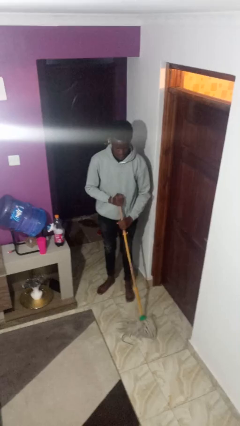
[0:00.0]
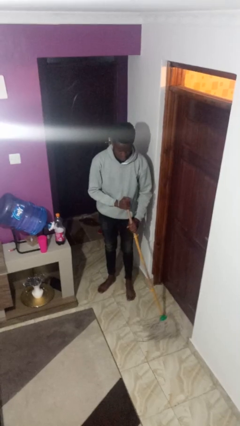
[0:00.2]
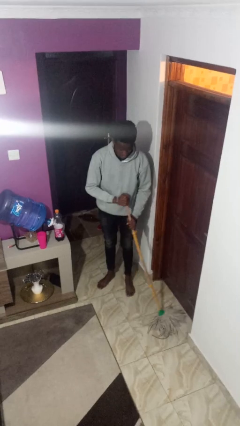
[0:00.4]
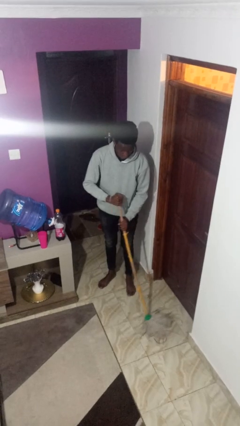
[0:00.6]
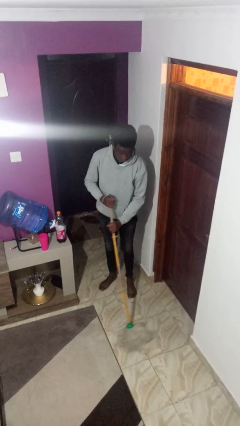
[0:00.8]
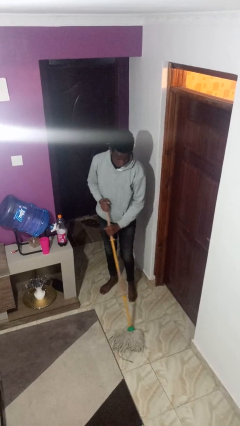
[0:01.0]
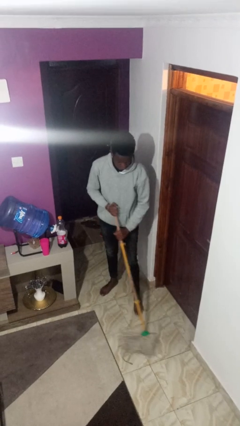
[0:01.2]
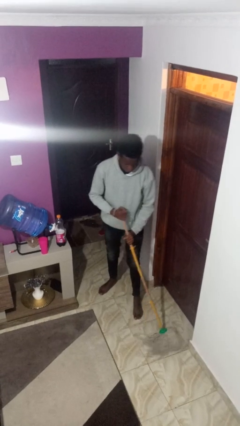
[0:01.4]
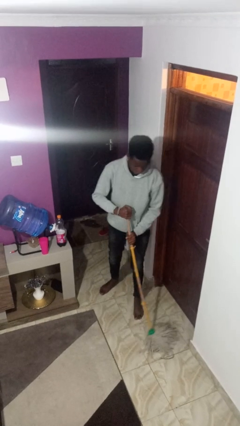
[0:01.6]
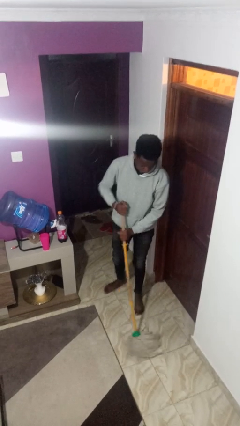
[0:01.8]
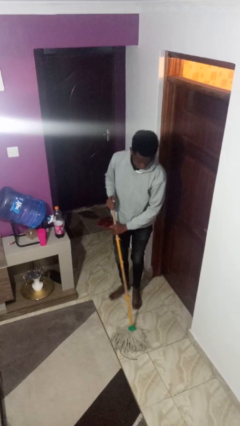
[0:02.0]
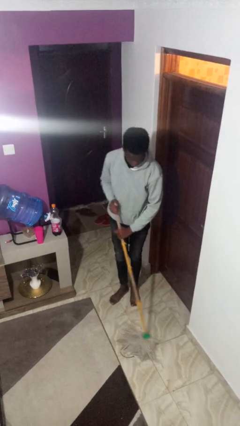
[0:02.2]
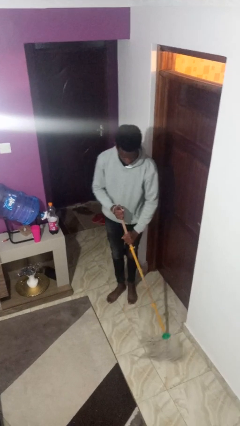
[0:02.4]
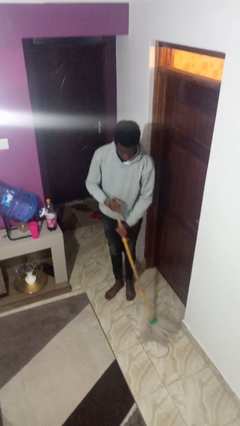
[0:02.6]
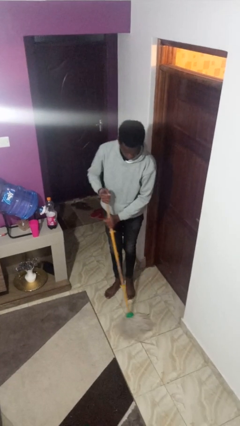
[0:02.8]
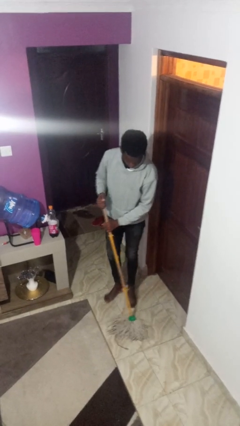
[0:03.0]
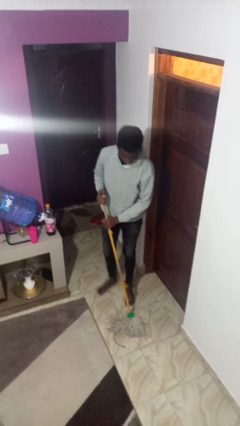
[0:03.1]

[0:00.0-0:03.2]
person mops

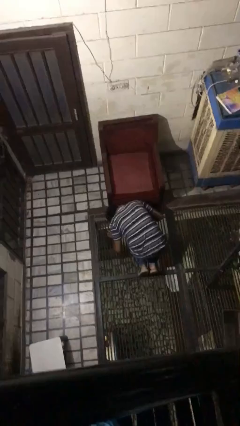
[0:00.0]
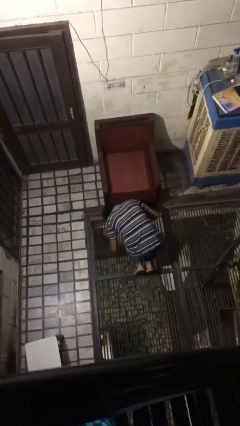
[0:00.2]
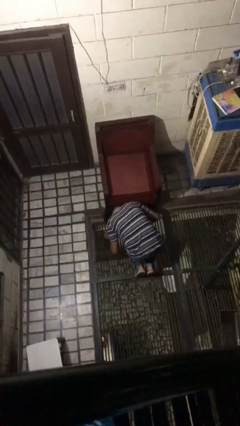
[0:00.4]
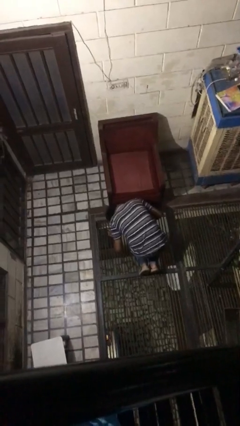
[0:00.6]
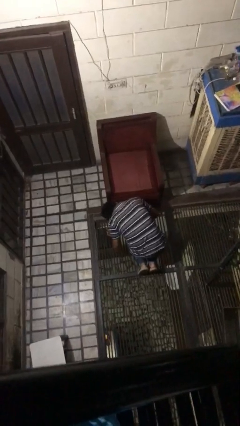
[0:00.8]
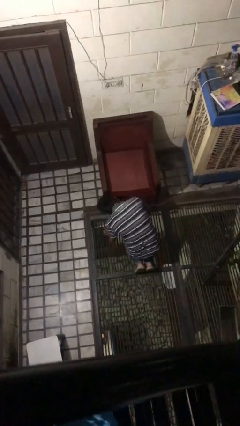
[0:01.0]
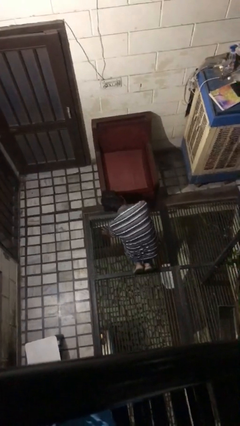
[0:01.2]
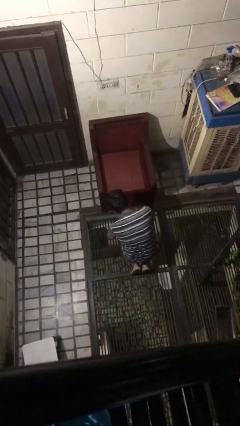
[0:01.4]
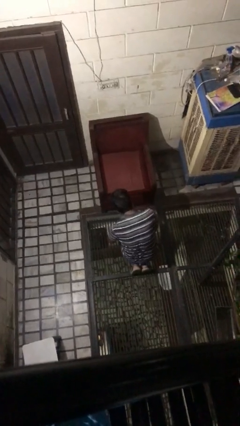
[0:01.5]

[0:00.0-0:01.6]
person searches under couch

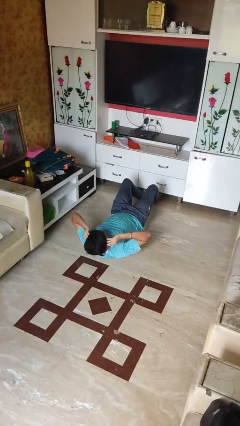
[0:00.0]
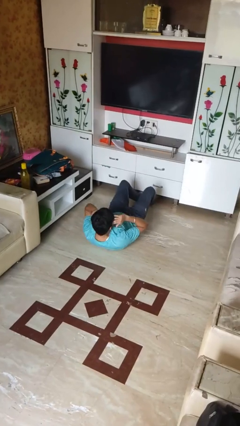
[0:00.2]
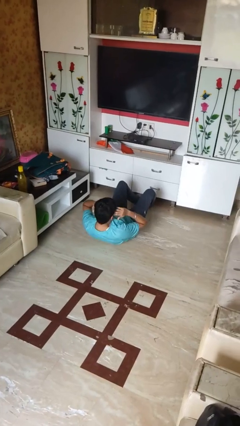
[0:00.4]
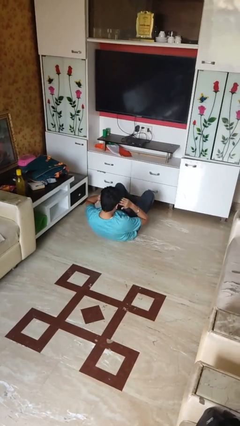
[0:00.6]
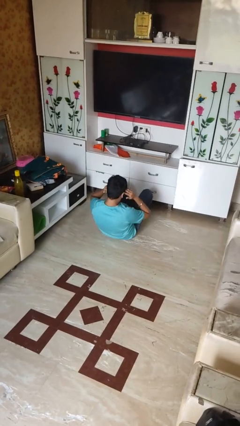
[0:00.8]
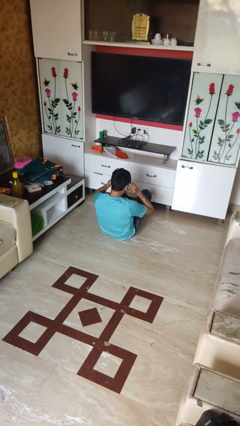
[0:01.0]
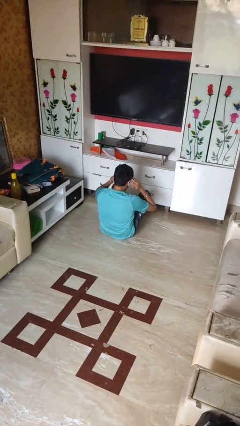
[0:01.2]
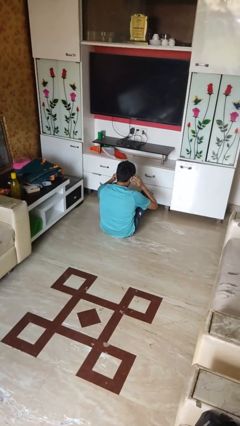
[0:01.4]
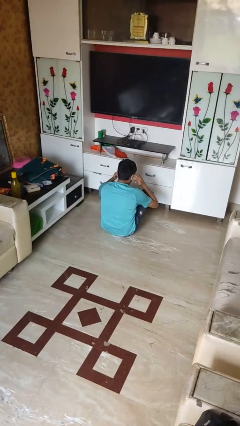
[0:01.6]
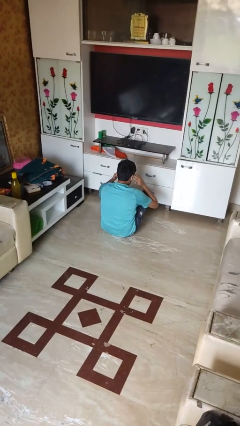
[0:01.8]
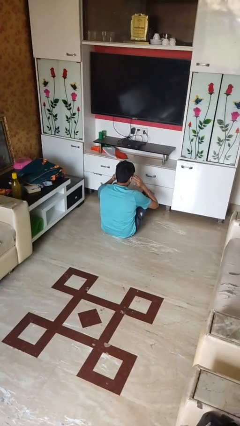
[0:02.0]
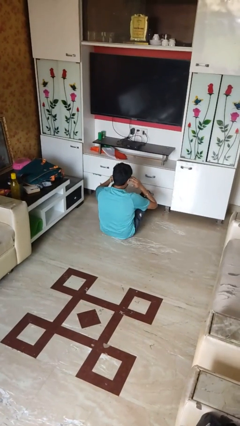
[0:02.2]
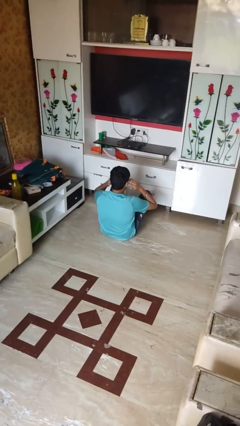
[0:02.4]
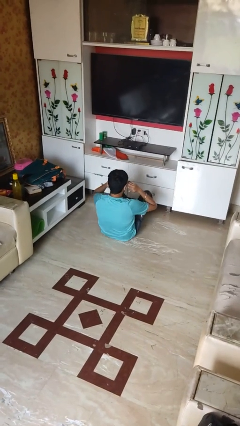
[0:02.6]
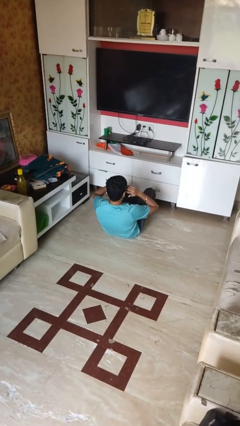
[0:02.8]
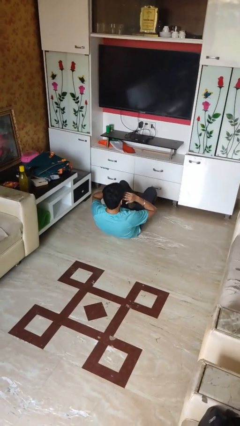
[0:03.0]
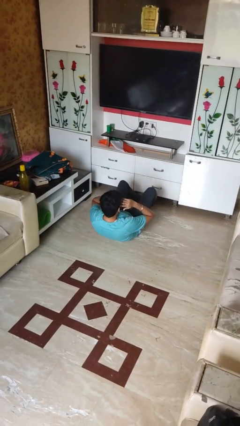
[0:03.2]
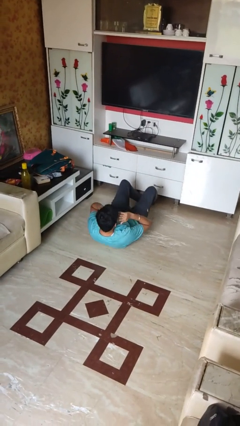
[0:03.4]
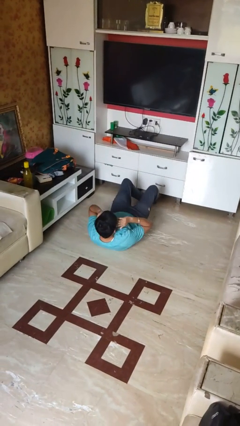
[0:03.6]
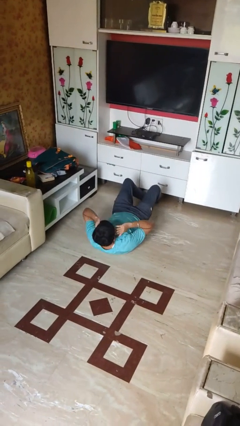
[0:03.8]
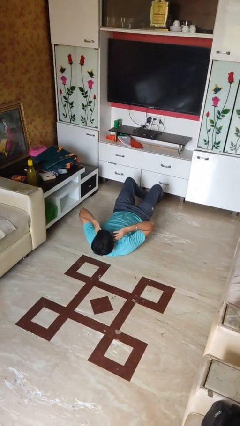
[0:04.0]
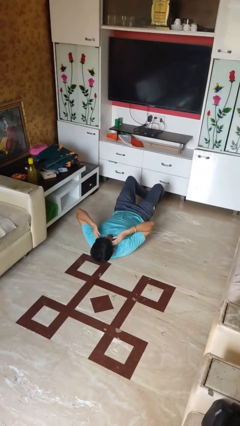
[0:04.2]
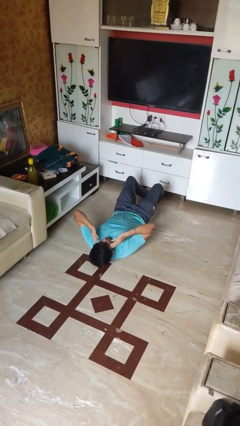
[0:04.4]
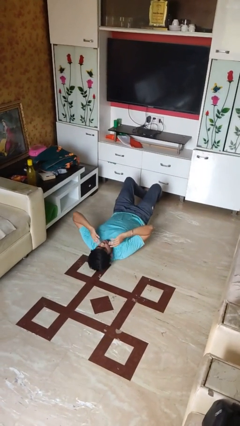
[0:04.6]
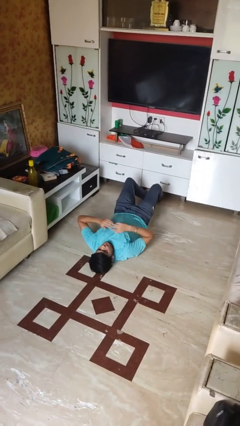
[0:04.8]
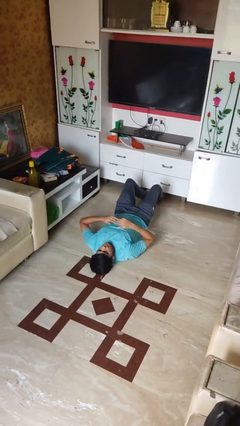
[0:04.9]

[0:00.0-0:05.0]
person exercises with situp

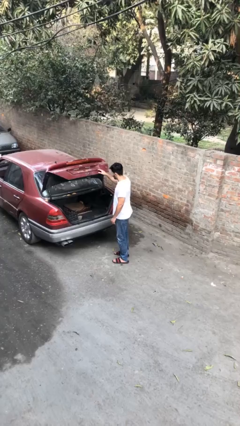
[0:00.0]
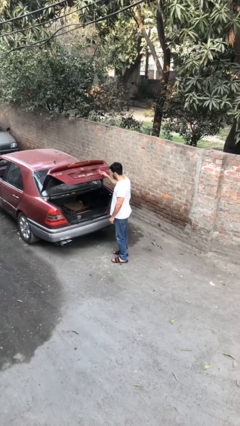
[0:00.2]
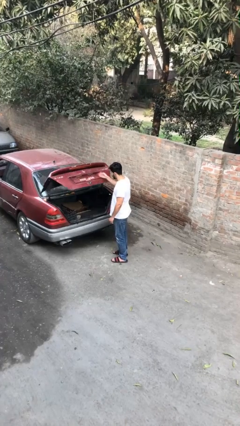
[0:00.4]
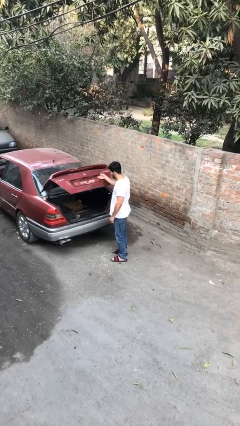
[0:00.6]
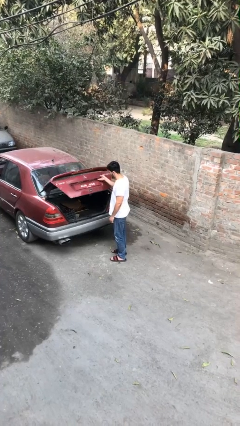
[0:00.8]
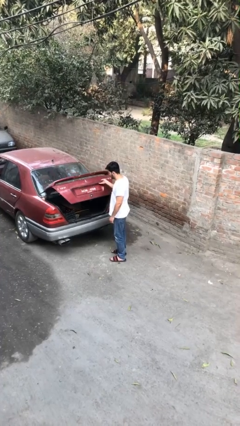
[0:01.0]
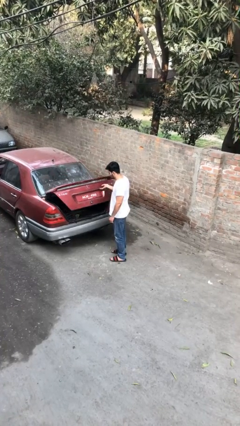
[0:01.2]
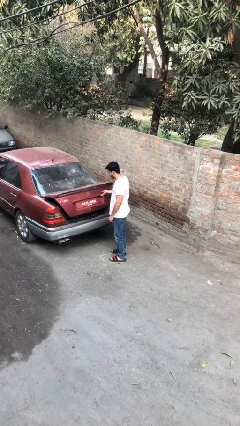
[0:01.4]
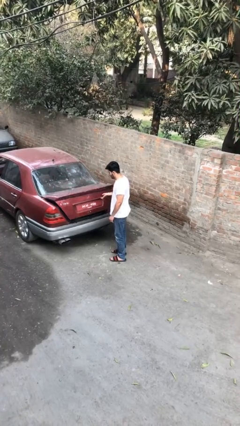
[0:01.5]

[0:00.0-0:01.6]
person closes car trunk

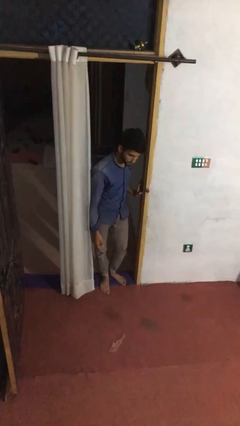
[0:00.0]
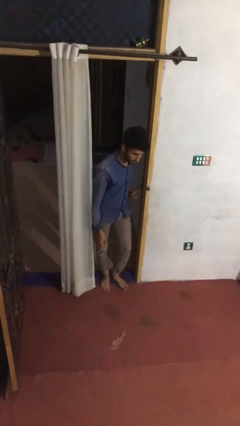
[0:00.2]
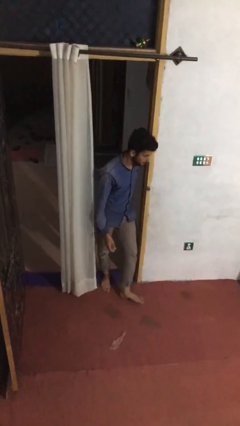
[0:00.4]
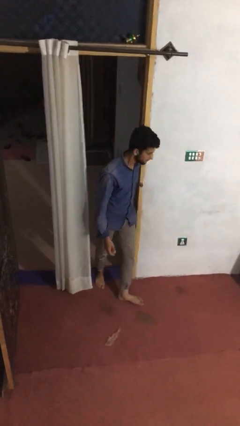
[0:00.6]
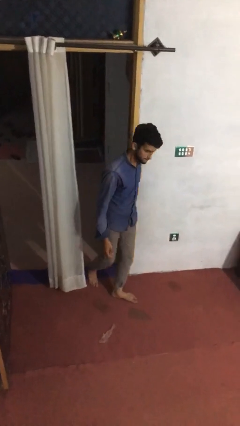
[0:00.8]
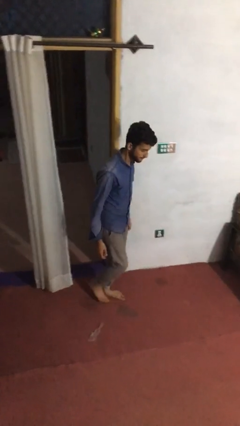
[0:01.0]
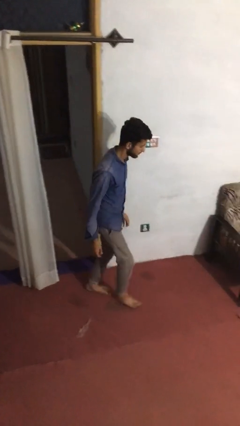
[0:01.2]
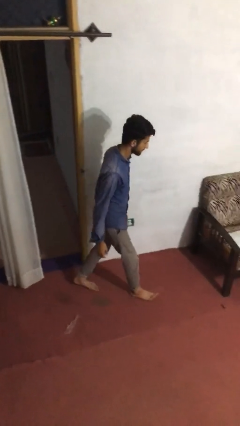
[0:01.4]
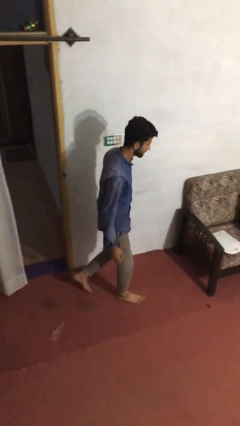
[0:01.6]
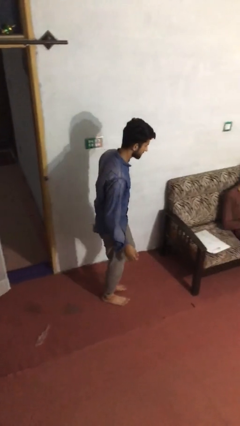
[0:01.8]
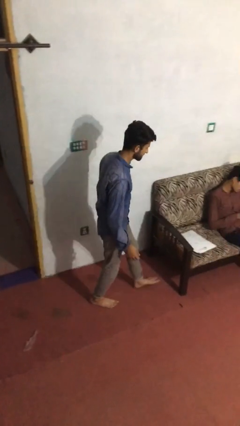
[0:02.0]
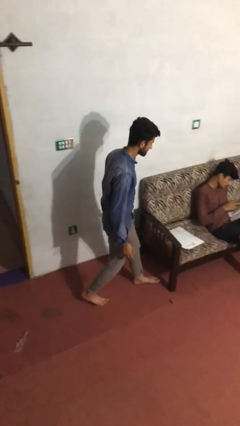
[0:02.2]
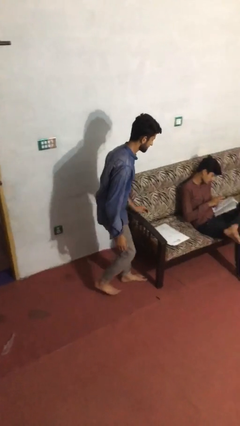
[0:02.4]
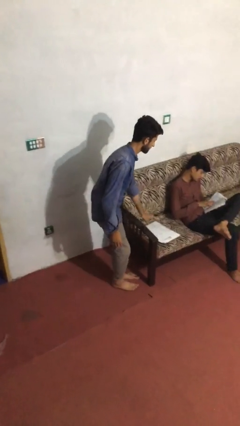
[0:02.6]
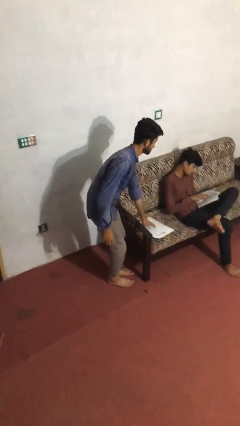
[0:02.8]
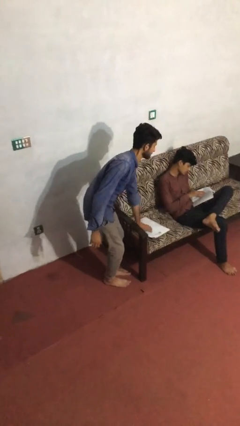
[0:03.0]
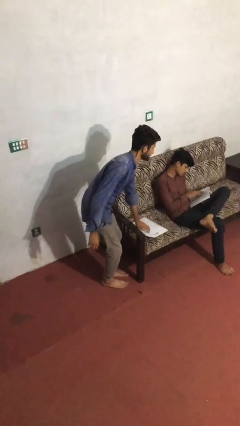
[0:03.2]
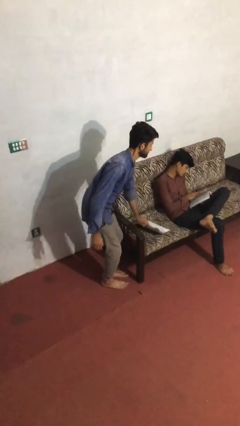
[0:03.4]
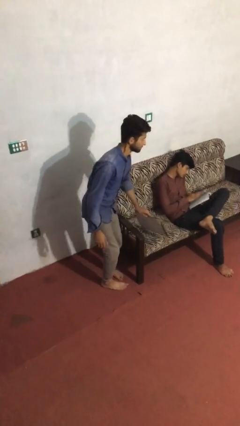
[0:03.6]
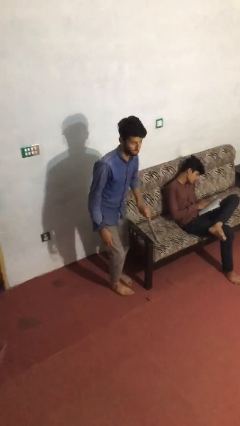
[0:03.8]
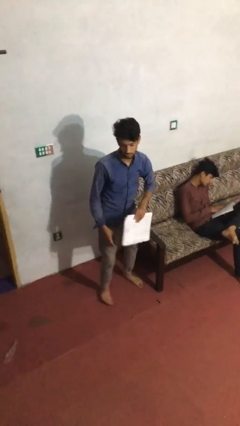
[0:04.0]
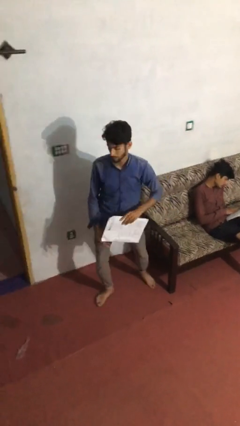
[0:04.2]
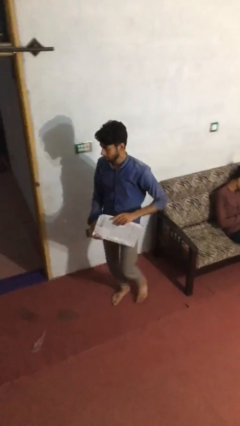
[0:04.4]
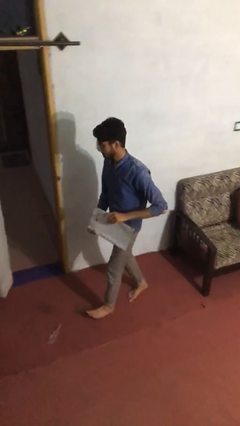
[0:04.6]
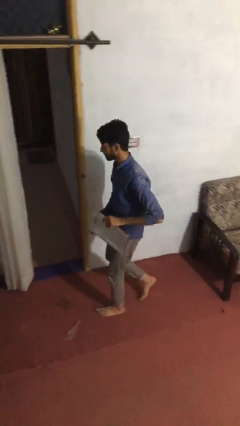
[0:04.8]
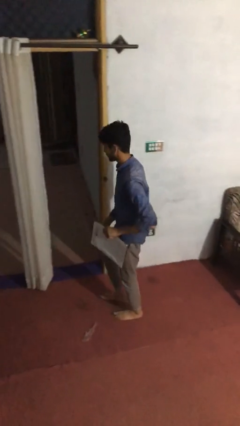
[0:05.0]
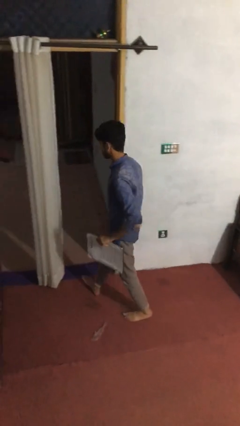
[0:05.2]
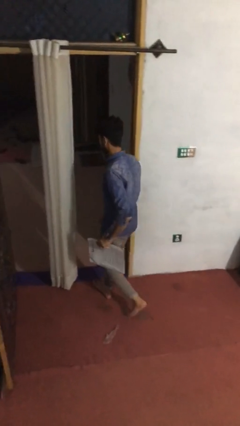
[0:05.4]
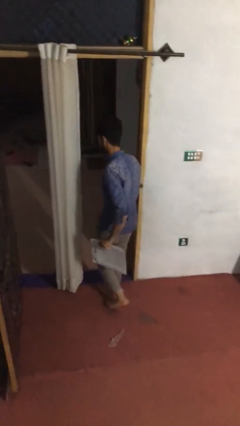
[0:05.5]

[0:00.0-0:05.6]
person steals object from person

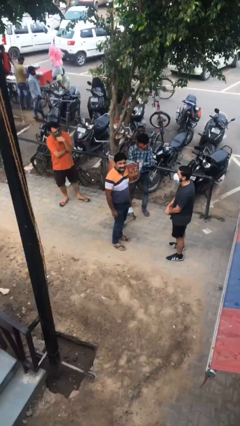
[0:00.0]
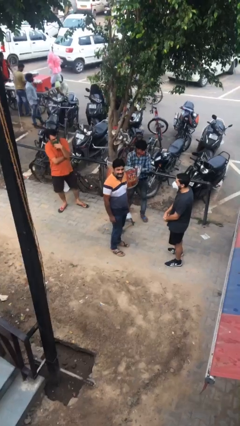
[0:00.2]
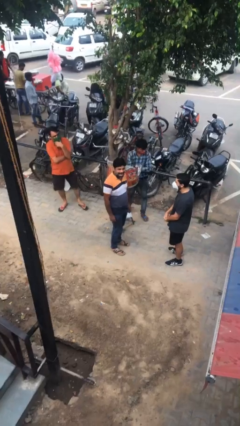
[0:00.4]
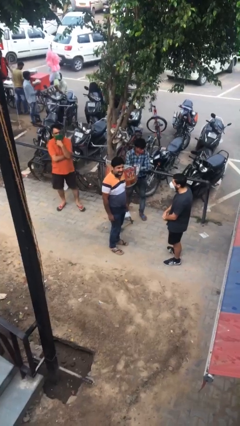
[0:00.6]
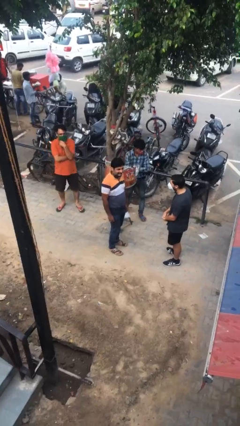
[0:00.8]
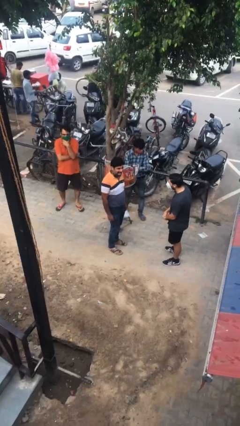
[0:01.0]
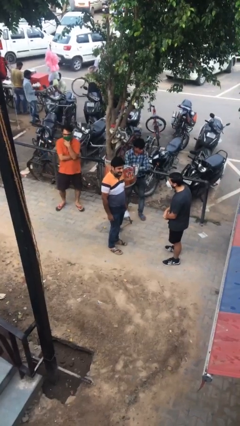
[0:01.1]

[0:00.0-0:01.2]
person laughs with person
